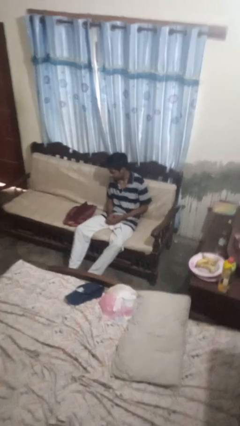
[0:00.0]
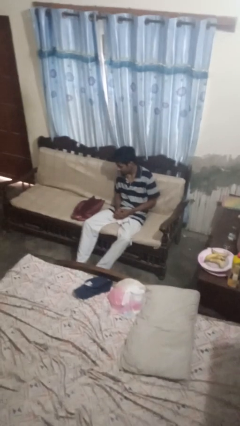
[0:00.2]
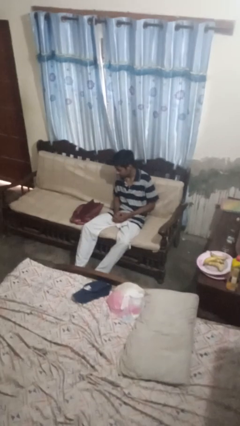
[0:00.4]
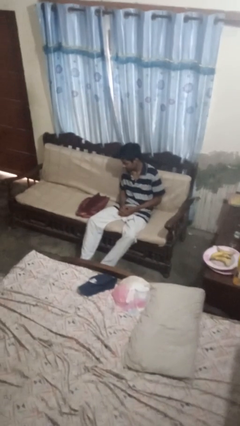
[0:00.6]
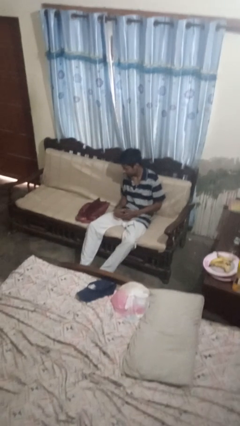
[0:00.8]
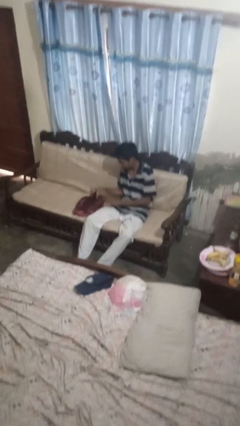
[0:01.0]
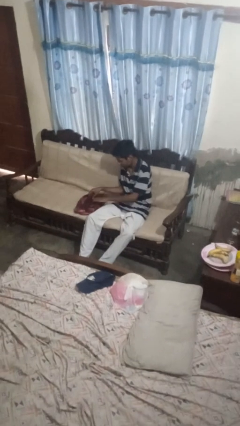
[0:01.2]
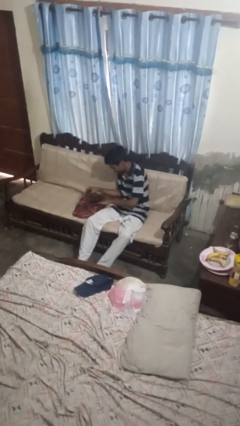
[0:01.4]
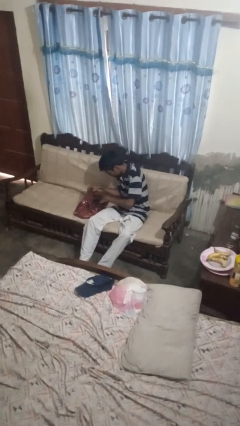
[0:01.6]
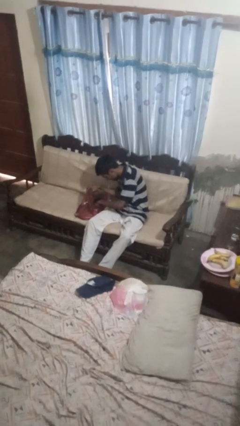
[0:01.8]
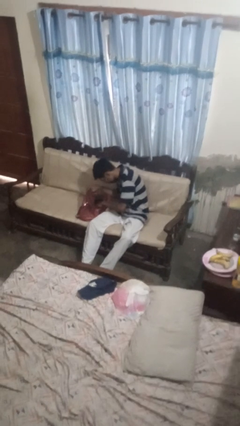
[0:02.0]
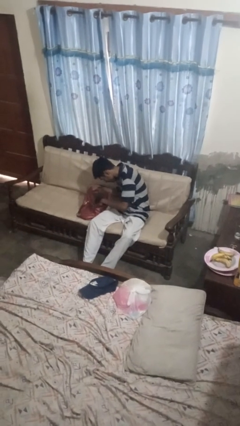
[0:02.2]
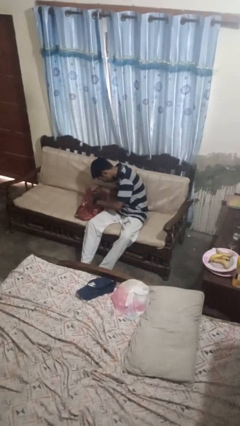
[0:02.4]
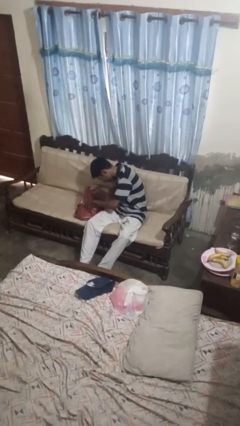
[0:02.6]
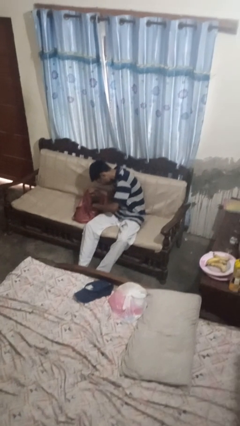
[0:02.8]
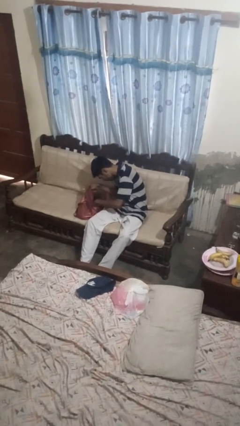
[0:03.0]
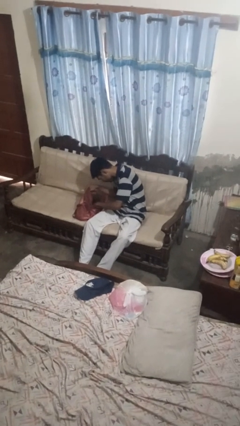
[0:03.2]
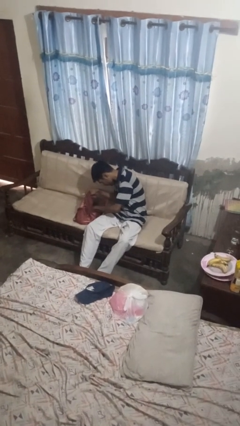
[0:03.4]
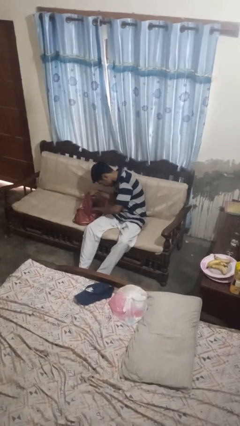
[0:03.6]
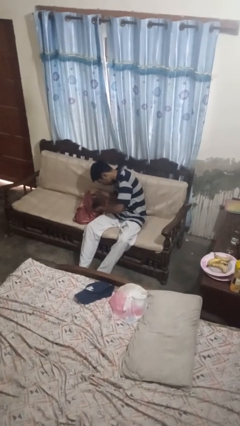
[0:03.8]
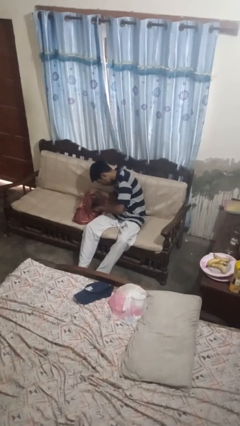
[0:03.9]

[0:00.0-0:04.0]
person searches in purse

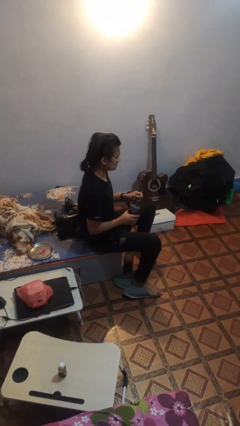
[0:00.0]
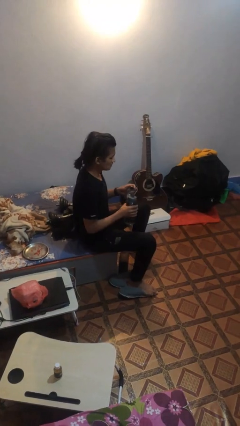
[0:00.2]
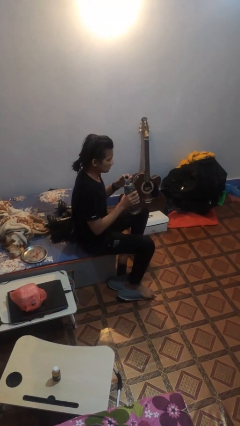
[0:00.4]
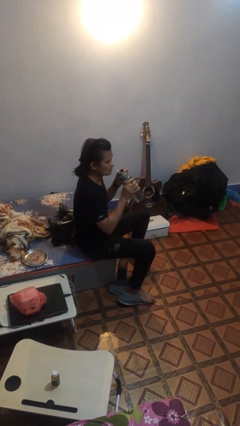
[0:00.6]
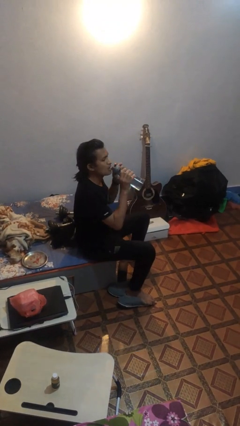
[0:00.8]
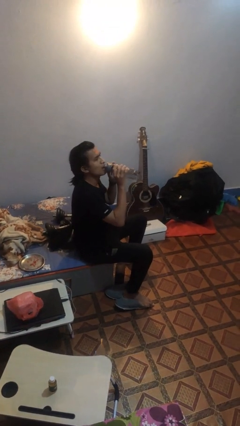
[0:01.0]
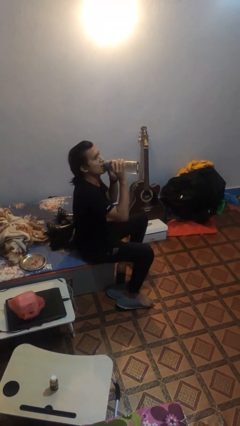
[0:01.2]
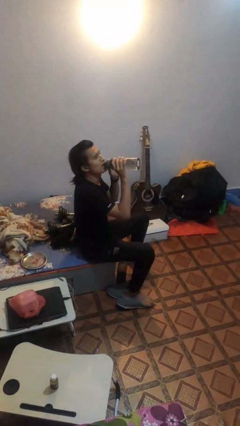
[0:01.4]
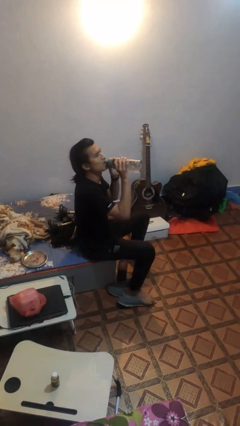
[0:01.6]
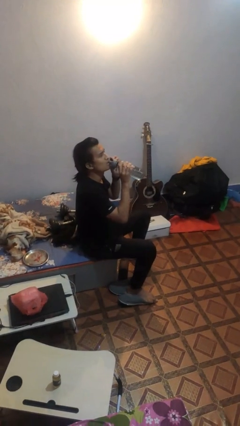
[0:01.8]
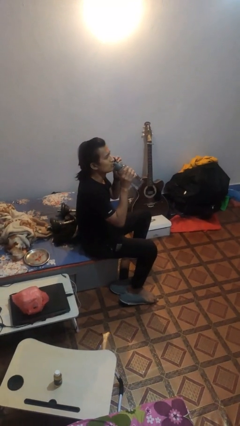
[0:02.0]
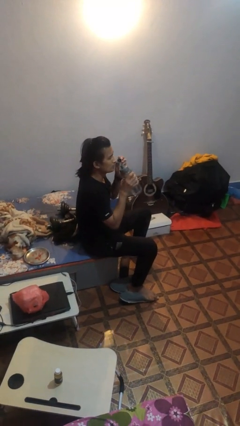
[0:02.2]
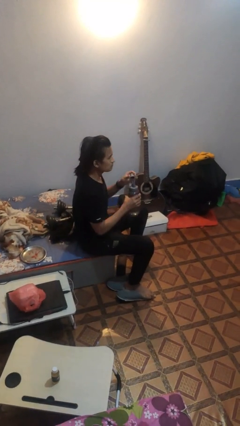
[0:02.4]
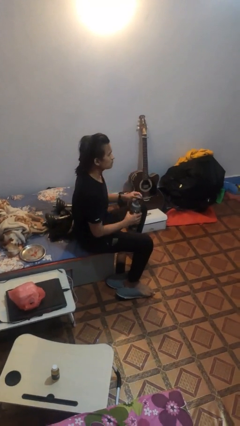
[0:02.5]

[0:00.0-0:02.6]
person drinks from bottle

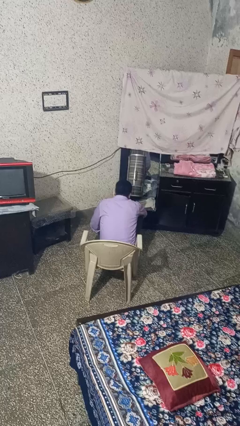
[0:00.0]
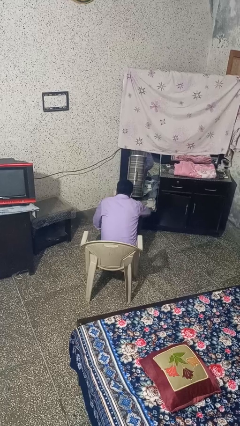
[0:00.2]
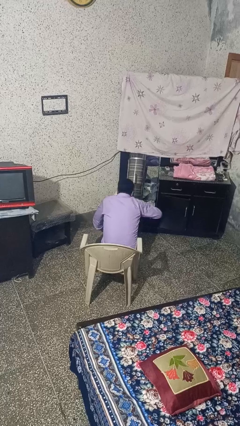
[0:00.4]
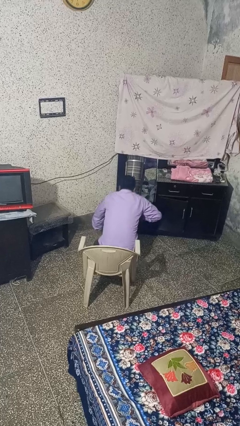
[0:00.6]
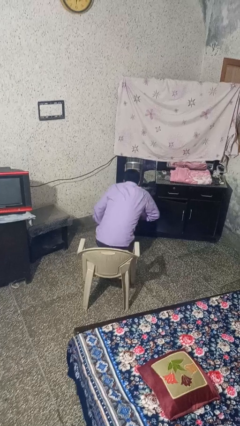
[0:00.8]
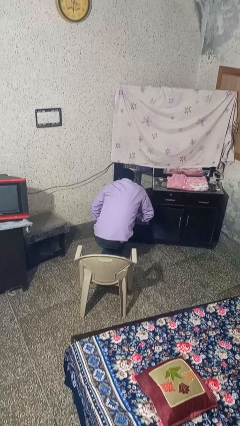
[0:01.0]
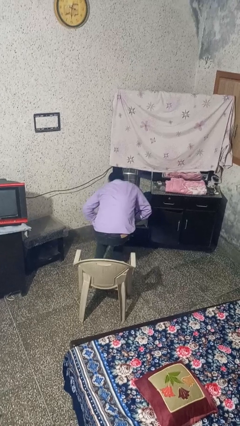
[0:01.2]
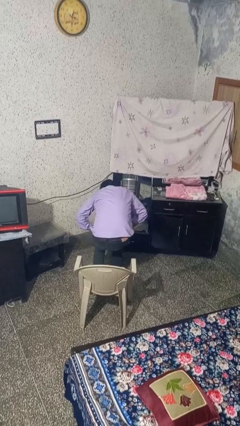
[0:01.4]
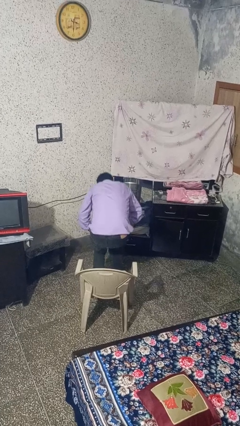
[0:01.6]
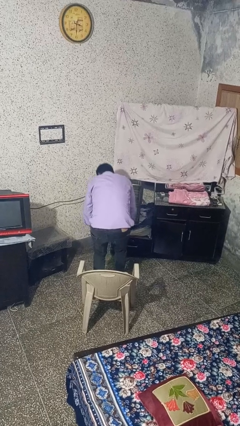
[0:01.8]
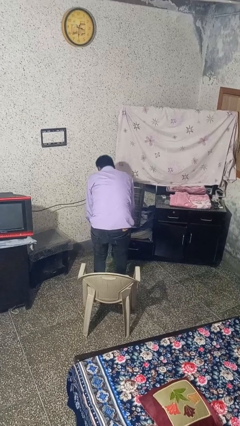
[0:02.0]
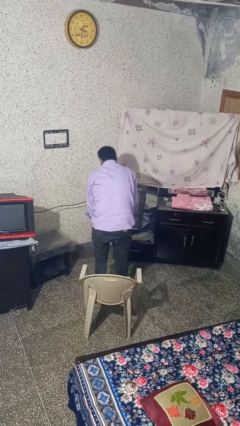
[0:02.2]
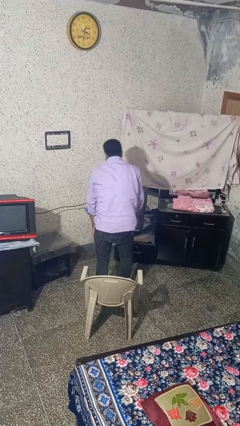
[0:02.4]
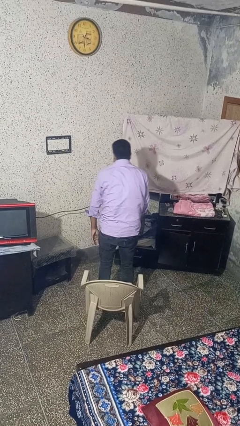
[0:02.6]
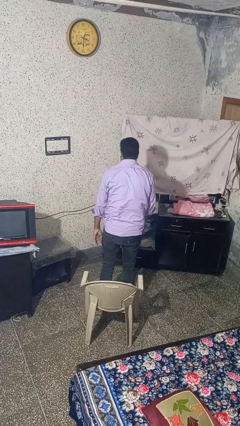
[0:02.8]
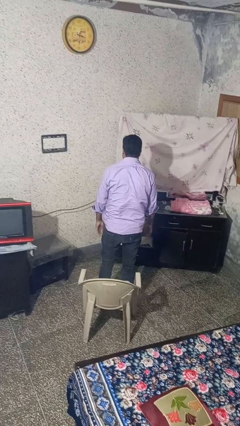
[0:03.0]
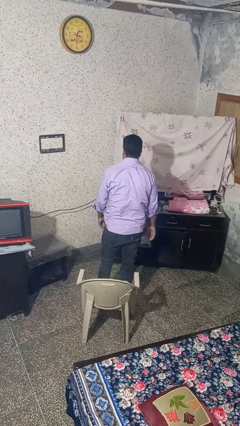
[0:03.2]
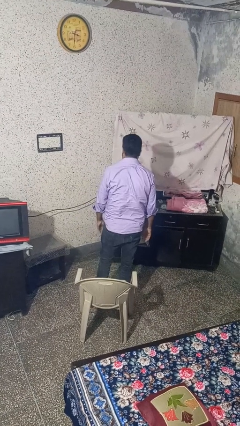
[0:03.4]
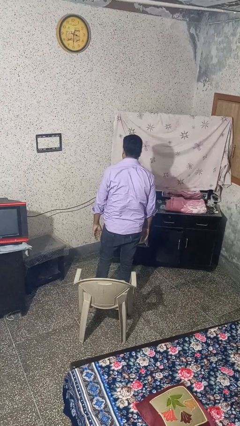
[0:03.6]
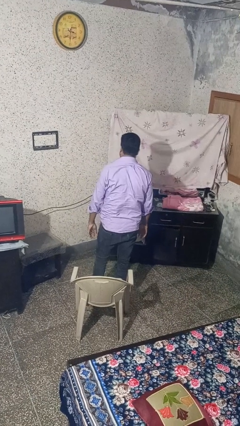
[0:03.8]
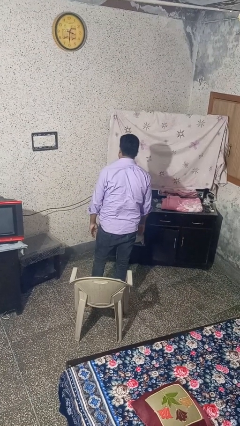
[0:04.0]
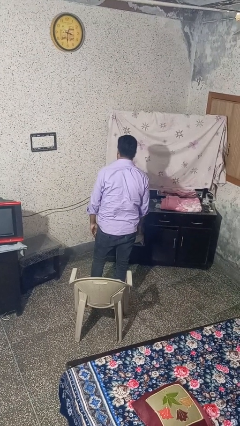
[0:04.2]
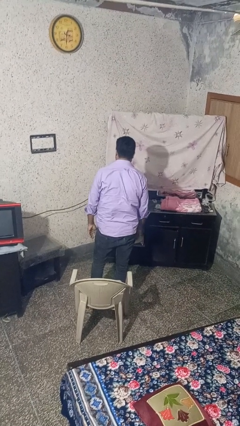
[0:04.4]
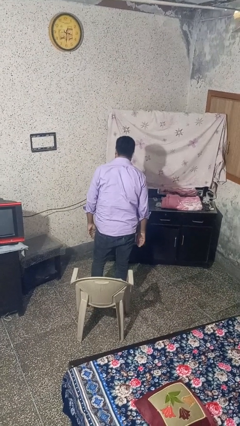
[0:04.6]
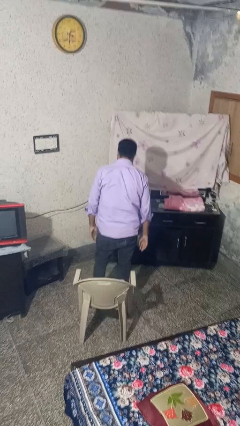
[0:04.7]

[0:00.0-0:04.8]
person stands up from floor

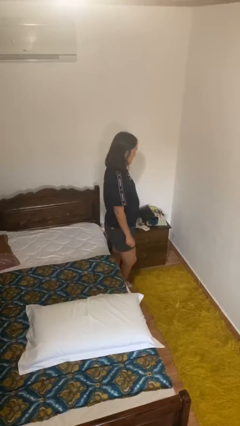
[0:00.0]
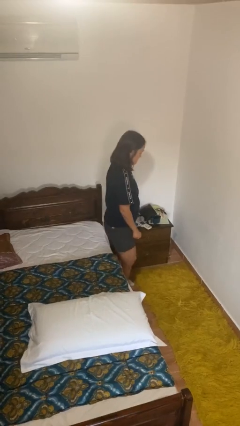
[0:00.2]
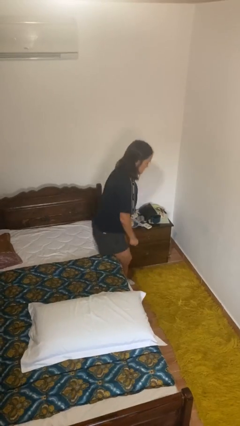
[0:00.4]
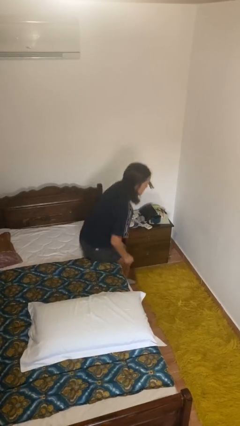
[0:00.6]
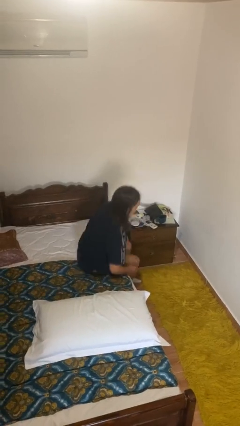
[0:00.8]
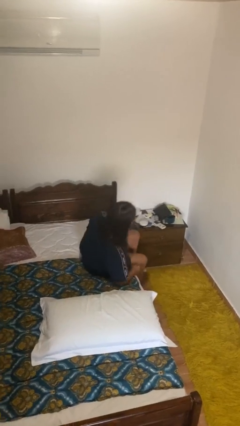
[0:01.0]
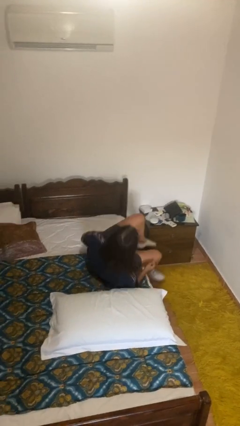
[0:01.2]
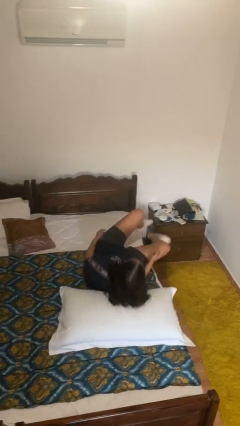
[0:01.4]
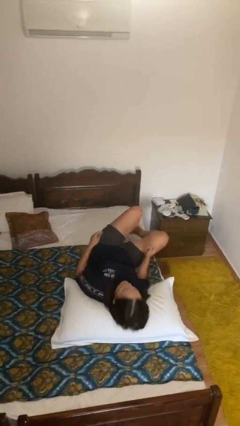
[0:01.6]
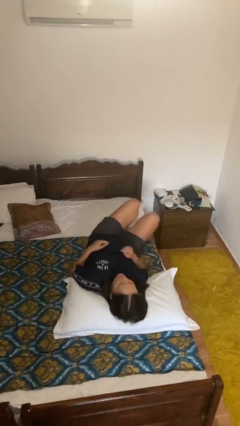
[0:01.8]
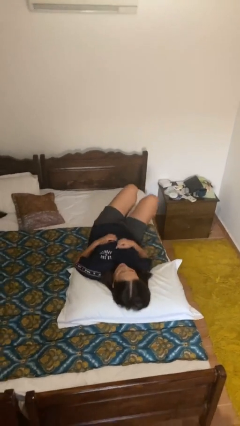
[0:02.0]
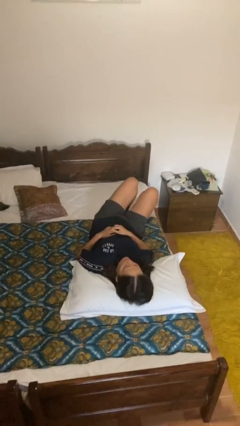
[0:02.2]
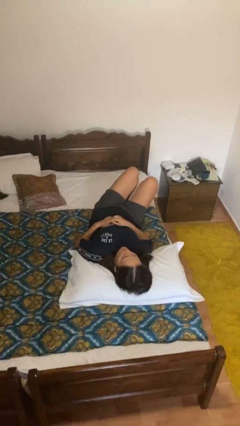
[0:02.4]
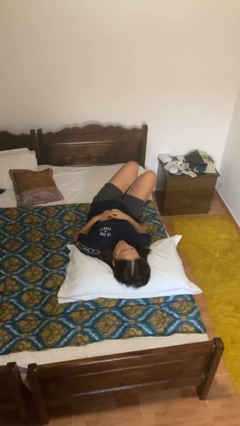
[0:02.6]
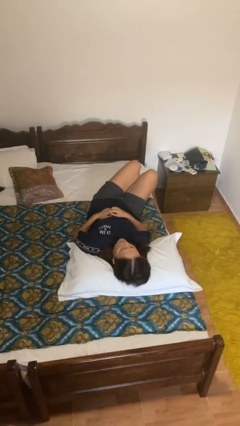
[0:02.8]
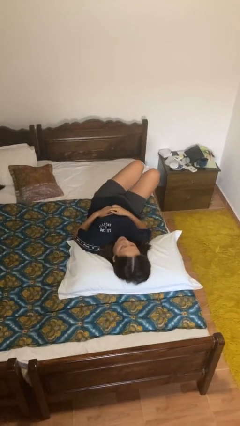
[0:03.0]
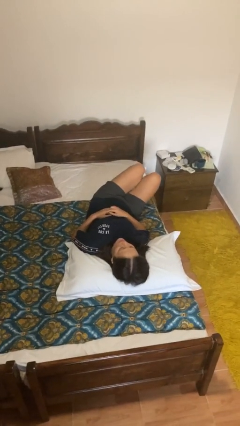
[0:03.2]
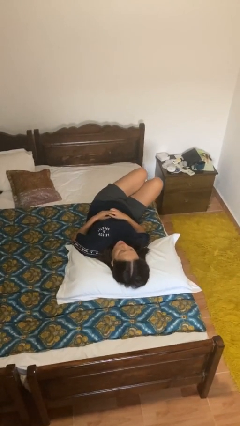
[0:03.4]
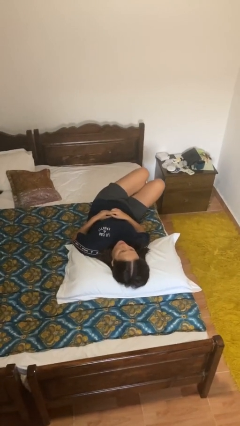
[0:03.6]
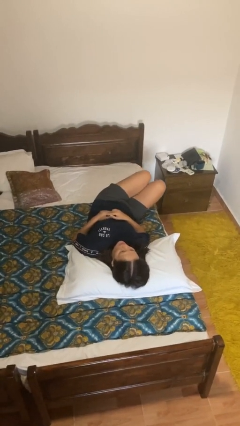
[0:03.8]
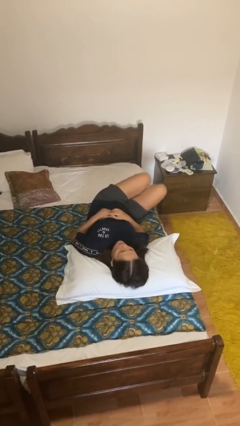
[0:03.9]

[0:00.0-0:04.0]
person lies down on bed

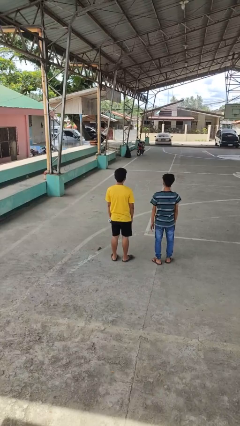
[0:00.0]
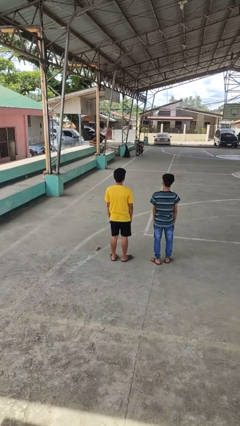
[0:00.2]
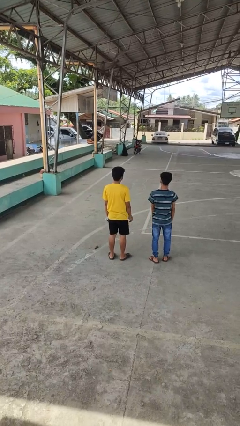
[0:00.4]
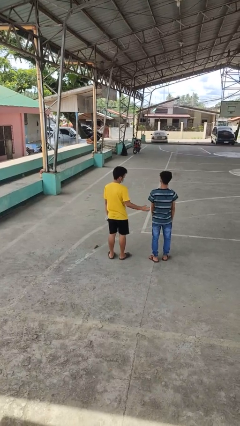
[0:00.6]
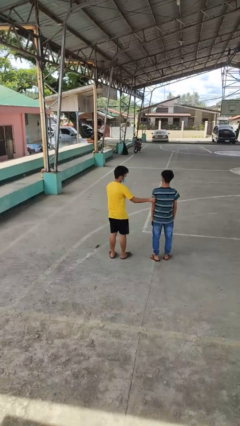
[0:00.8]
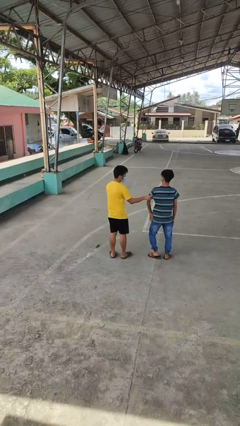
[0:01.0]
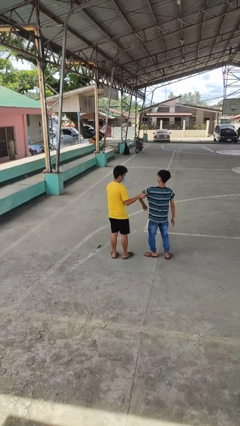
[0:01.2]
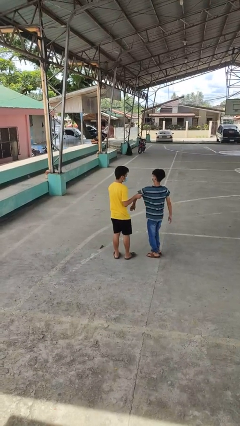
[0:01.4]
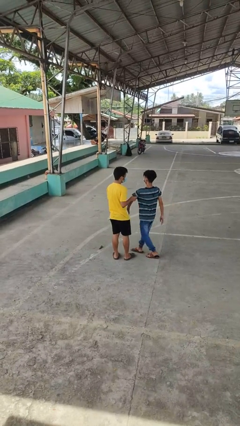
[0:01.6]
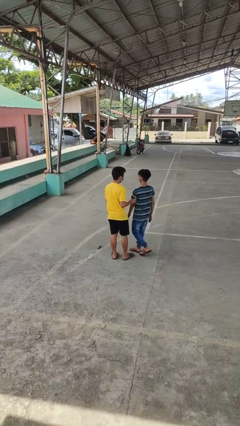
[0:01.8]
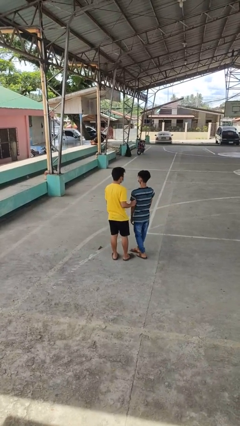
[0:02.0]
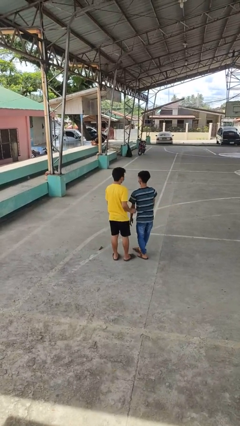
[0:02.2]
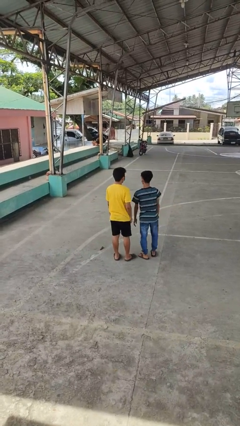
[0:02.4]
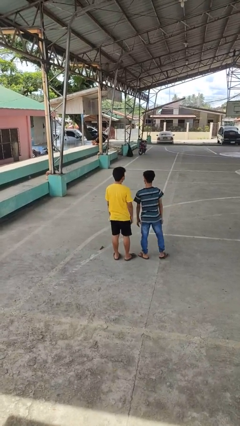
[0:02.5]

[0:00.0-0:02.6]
person grabs person by bicep
